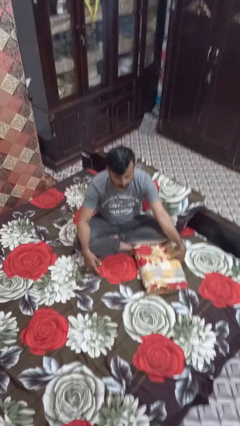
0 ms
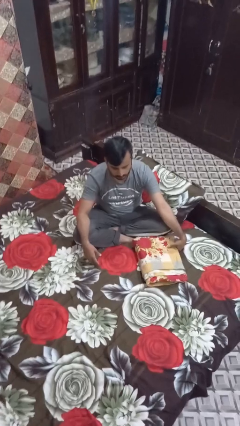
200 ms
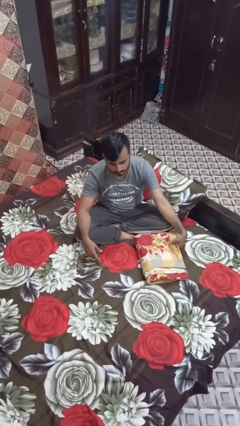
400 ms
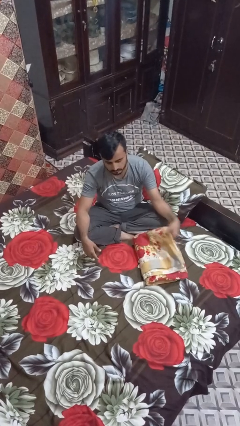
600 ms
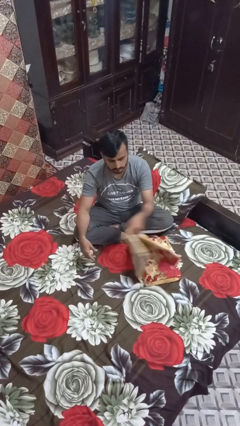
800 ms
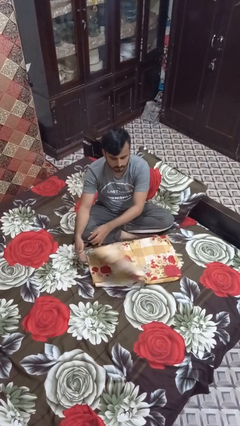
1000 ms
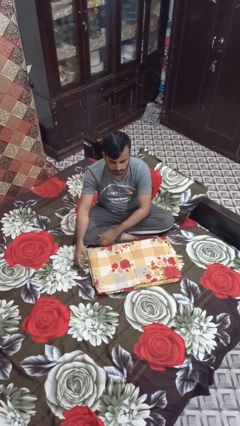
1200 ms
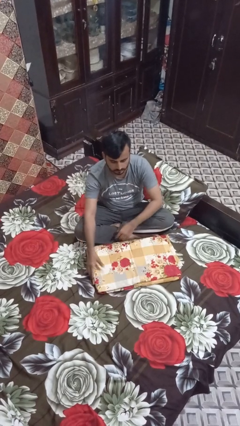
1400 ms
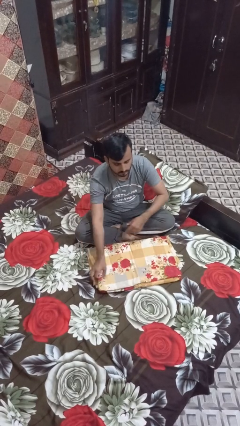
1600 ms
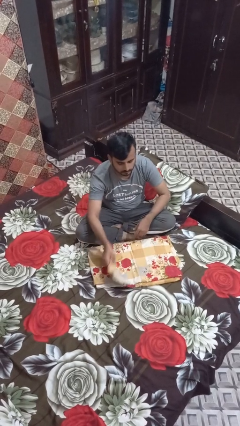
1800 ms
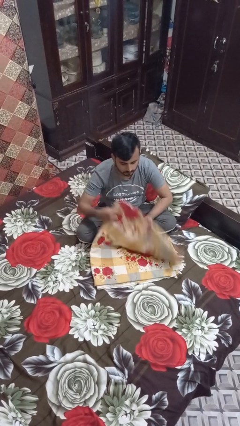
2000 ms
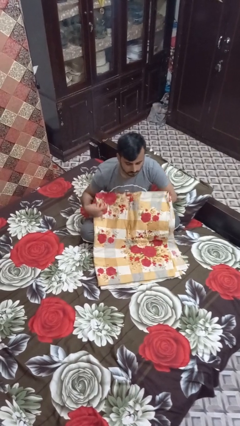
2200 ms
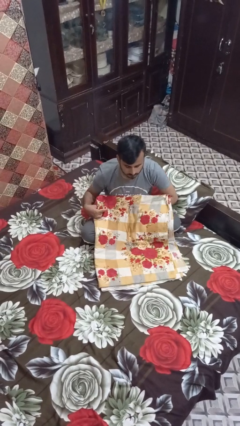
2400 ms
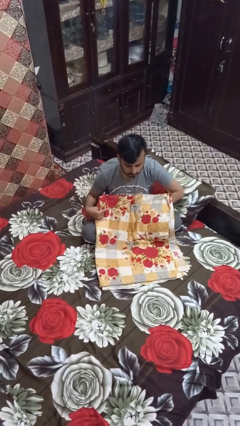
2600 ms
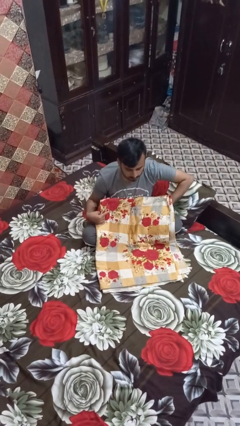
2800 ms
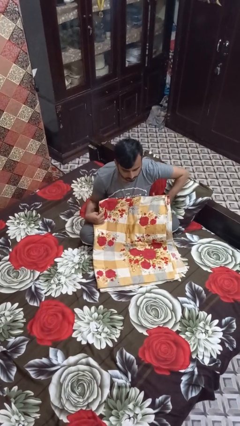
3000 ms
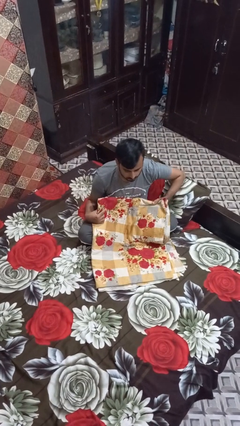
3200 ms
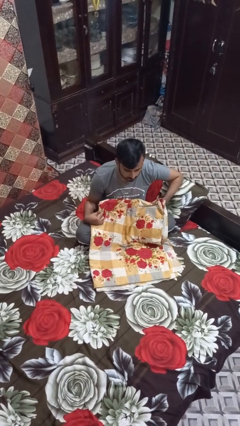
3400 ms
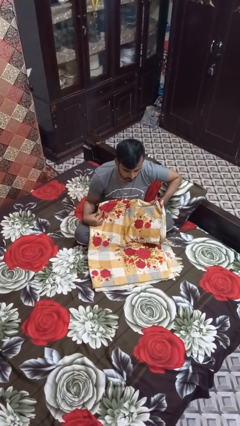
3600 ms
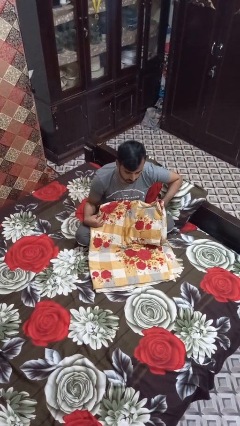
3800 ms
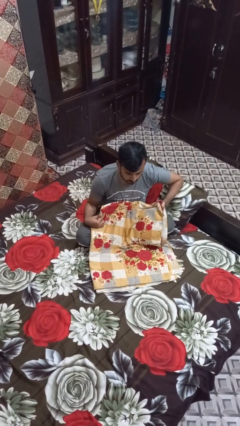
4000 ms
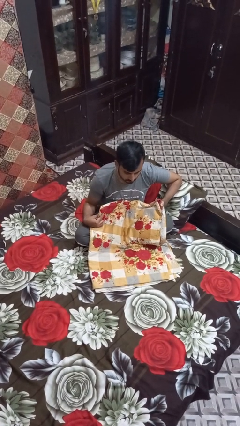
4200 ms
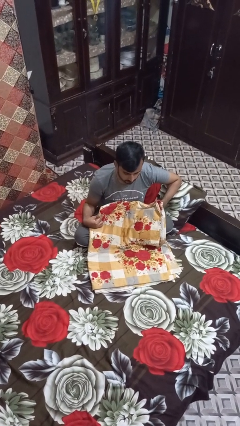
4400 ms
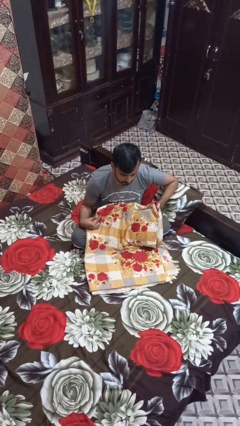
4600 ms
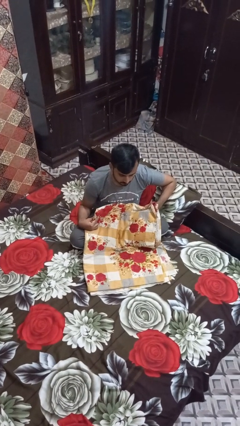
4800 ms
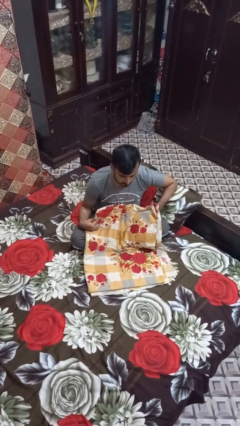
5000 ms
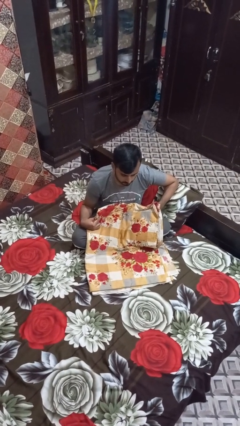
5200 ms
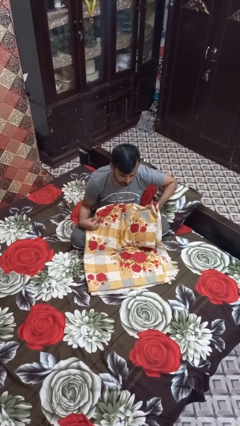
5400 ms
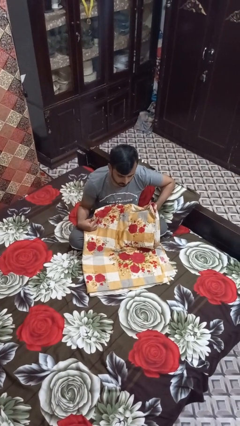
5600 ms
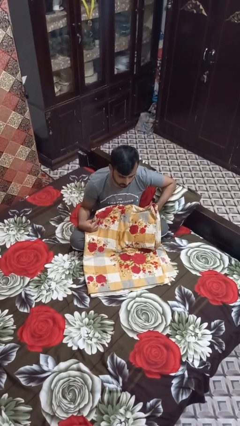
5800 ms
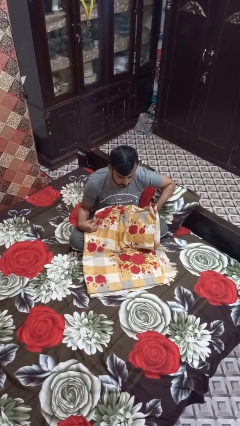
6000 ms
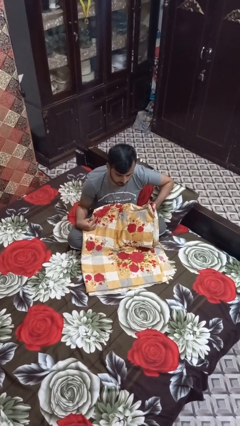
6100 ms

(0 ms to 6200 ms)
person unfolds blanket

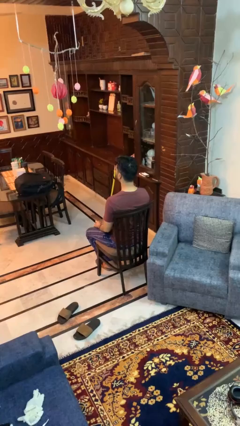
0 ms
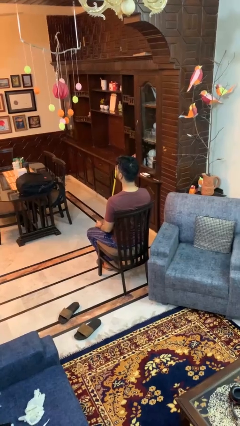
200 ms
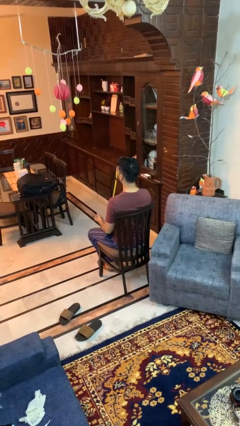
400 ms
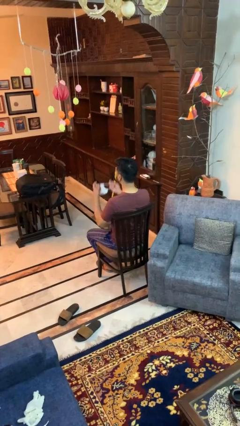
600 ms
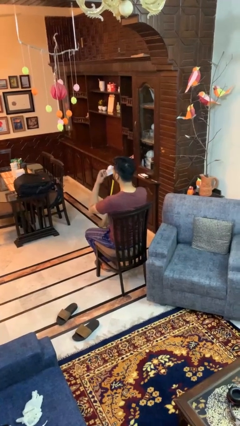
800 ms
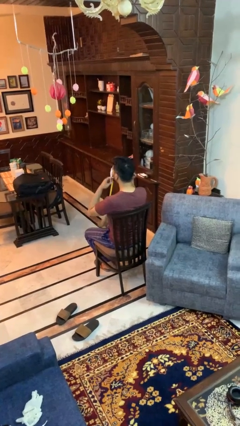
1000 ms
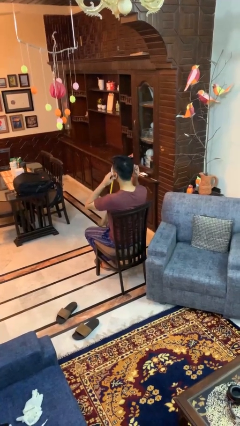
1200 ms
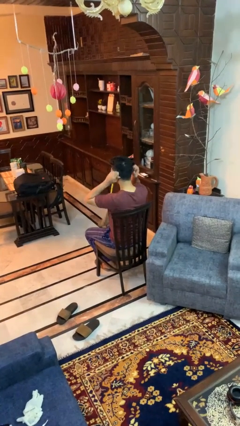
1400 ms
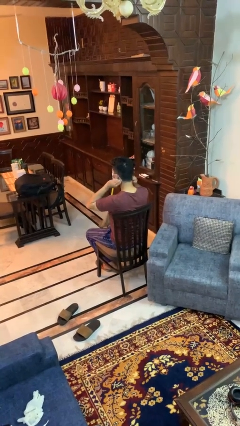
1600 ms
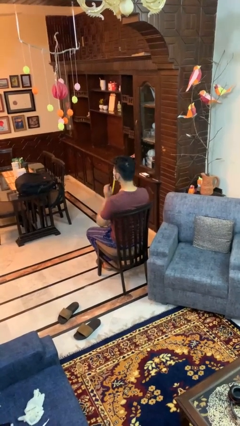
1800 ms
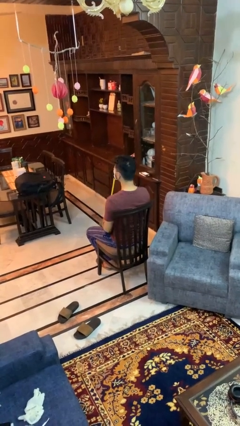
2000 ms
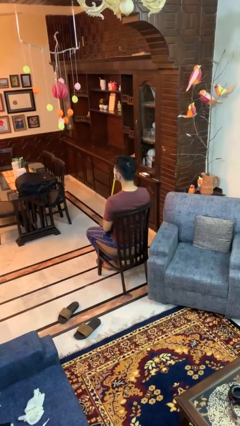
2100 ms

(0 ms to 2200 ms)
person puts on facemask

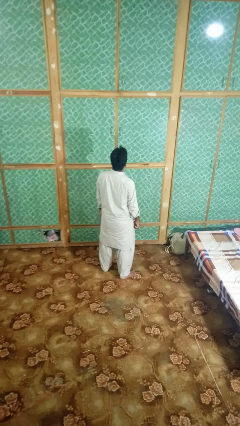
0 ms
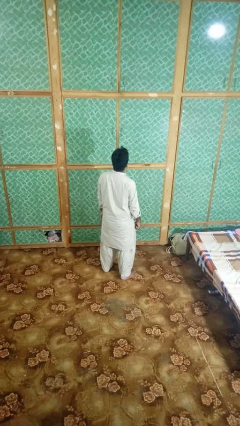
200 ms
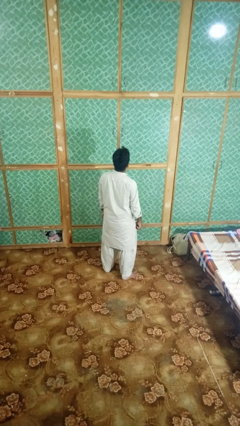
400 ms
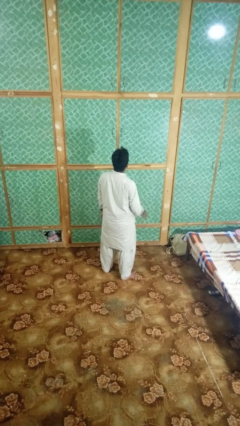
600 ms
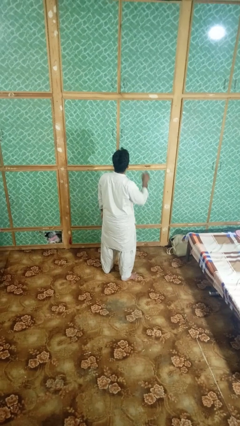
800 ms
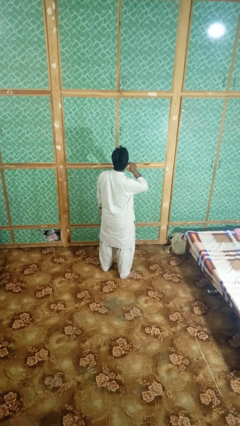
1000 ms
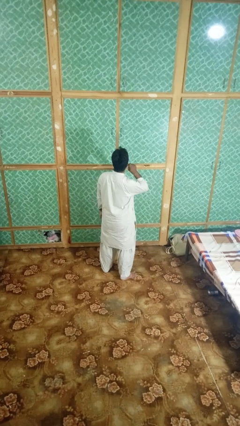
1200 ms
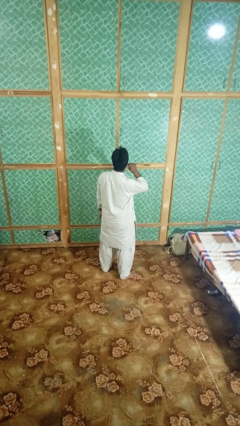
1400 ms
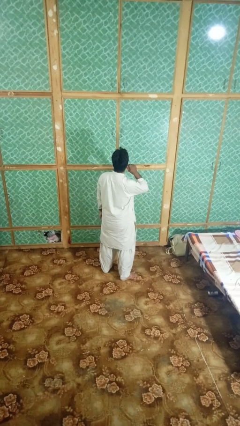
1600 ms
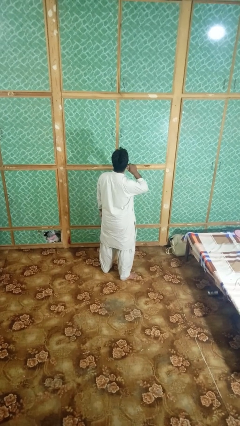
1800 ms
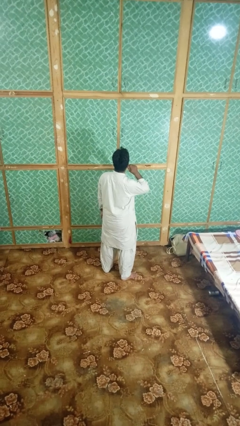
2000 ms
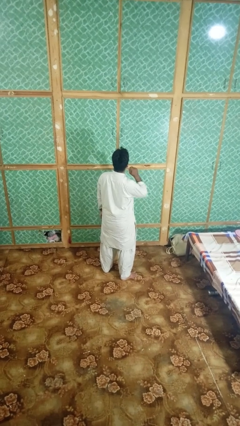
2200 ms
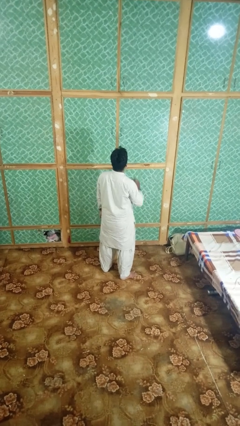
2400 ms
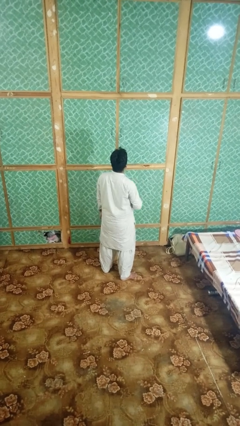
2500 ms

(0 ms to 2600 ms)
person touches earlobe

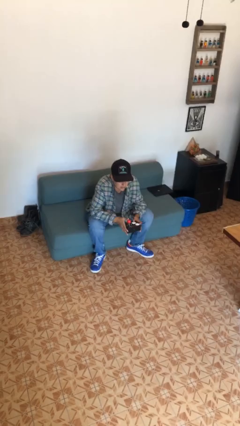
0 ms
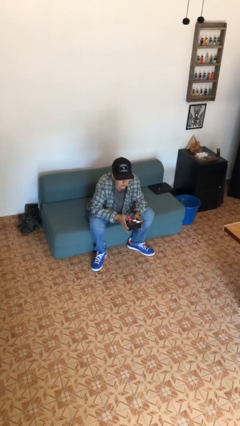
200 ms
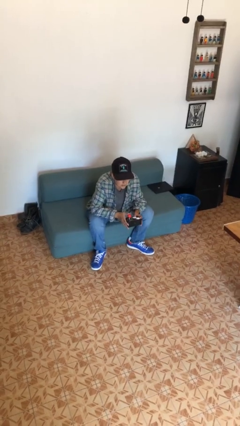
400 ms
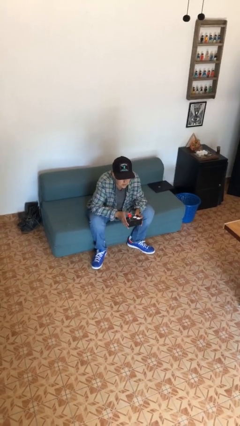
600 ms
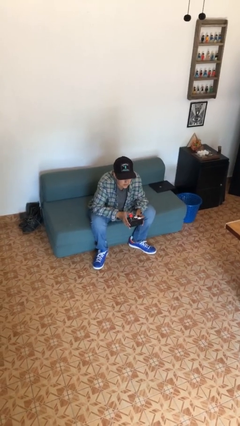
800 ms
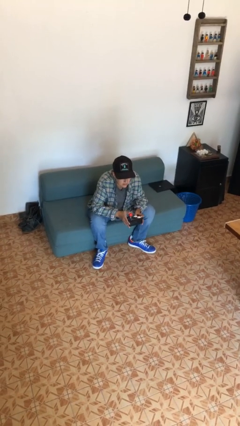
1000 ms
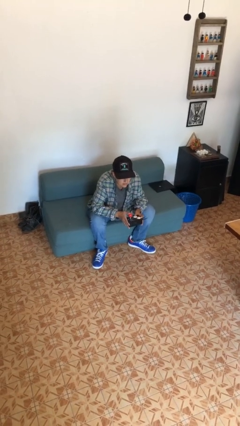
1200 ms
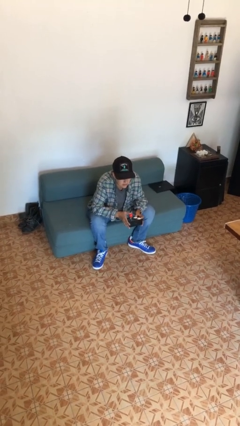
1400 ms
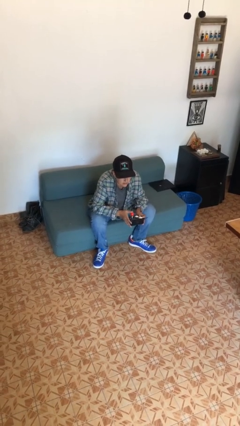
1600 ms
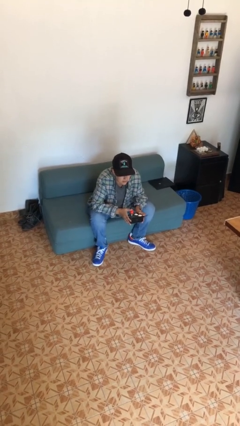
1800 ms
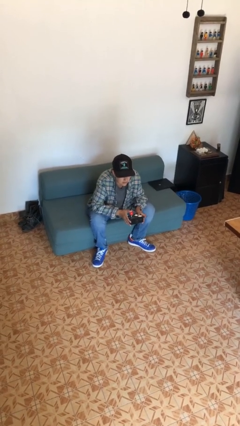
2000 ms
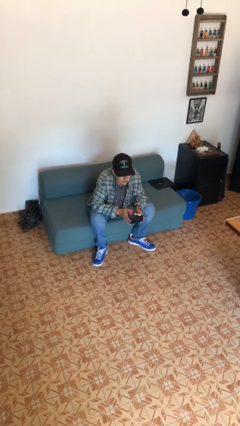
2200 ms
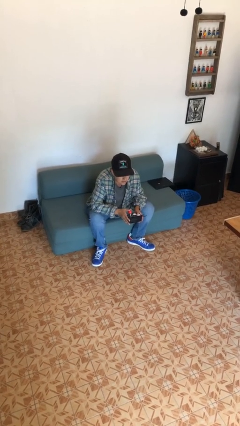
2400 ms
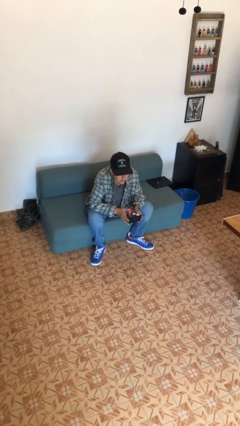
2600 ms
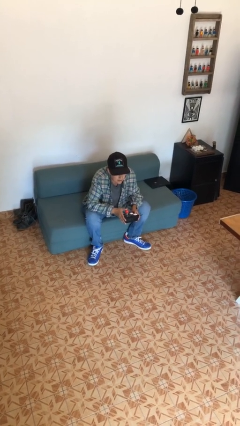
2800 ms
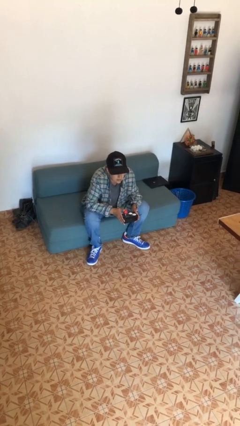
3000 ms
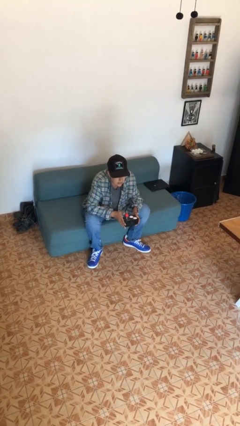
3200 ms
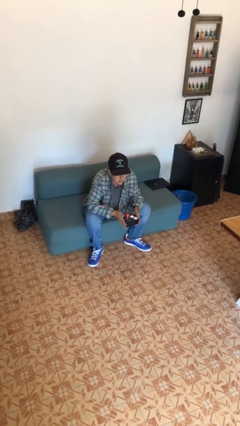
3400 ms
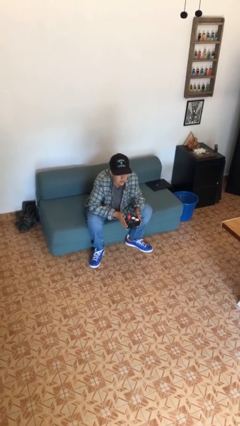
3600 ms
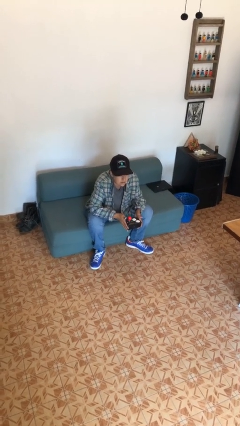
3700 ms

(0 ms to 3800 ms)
person interacts with handheld game

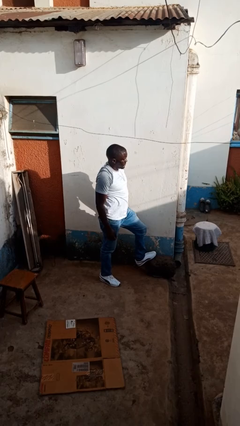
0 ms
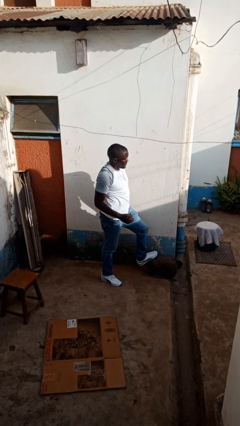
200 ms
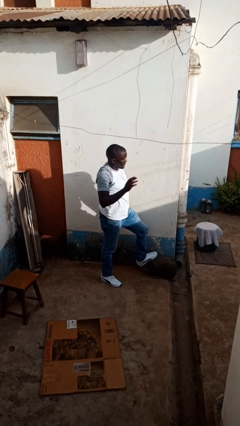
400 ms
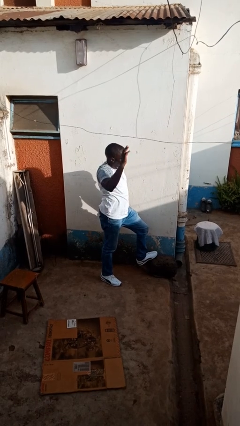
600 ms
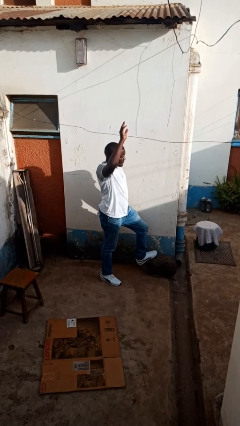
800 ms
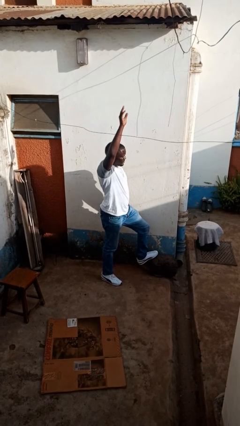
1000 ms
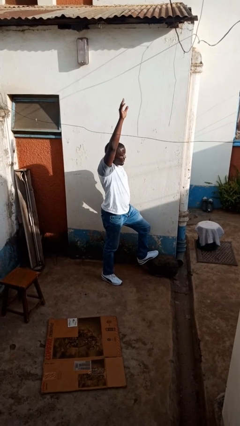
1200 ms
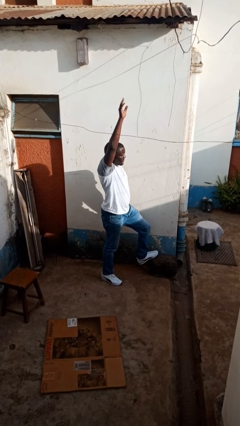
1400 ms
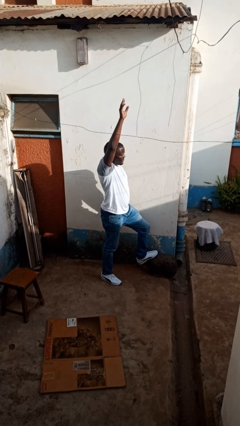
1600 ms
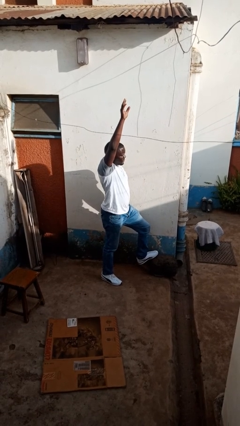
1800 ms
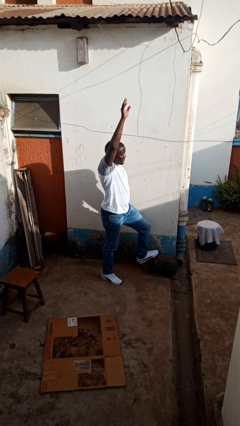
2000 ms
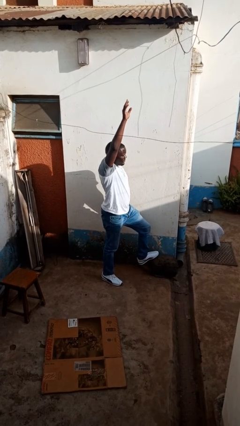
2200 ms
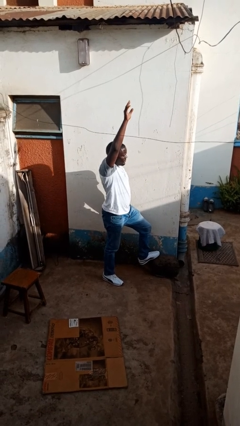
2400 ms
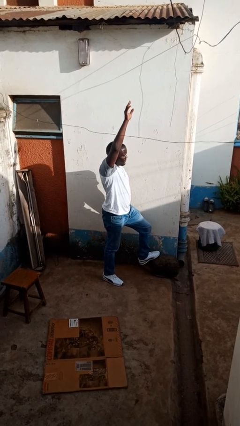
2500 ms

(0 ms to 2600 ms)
person gestures raise hand

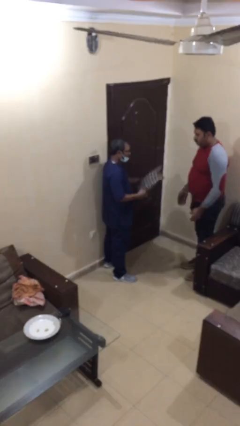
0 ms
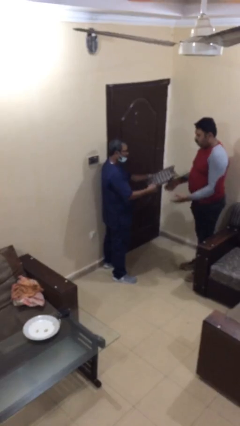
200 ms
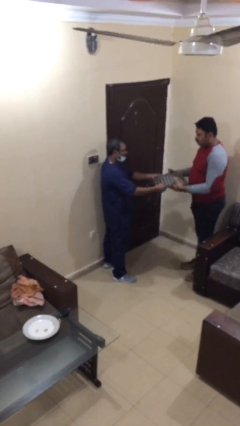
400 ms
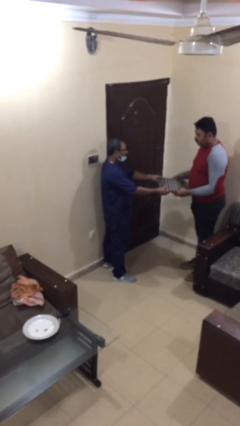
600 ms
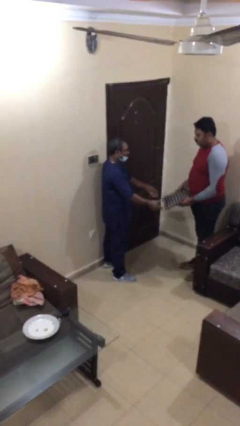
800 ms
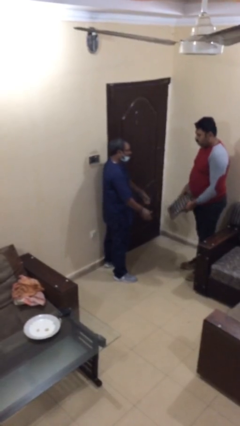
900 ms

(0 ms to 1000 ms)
person transfers object to person
